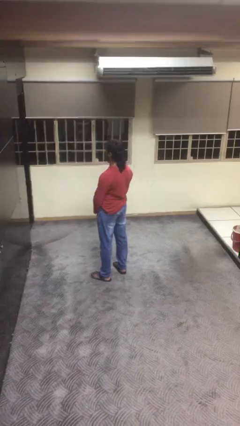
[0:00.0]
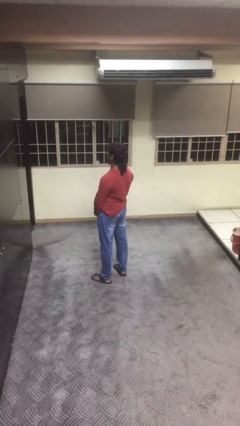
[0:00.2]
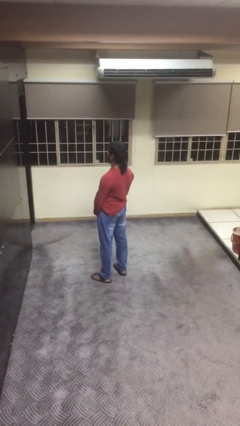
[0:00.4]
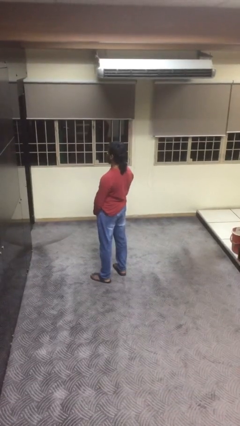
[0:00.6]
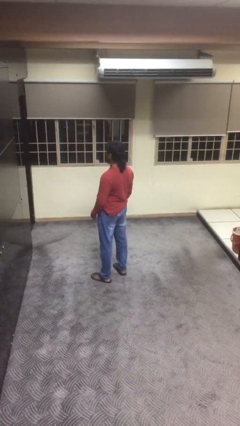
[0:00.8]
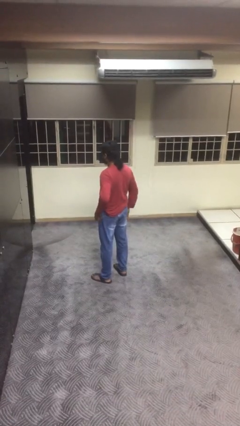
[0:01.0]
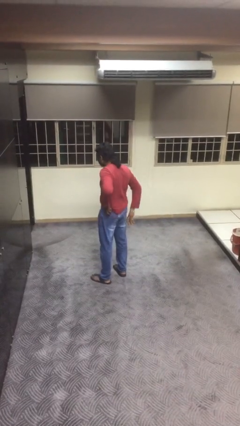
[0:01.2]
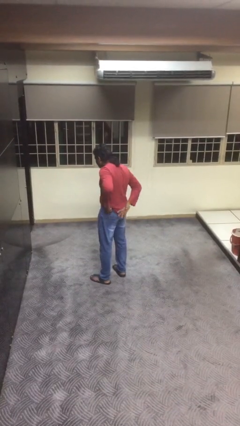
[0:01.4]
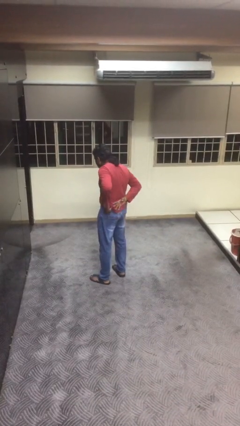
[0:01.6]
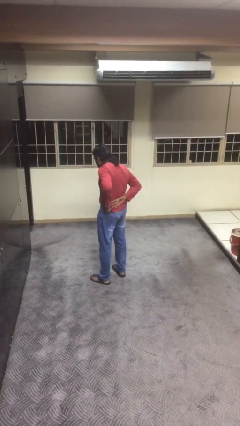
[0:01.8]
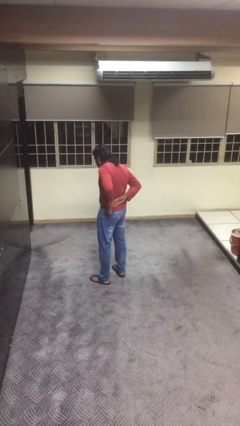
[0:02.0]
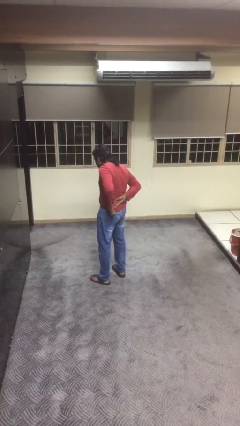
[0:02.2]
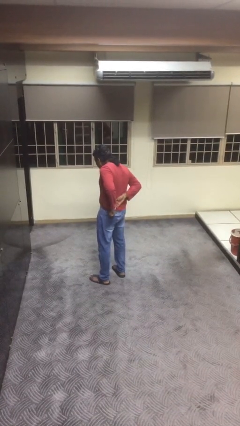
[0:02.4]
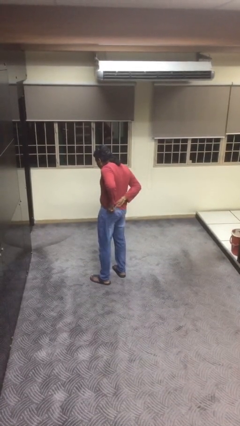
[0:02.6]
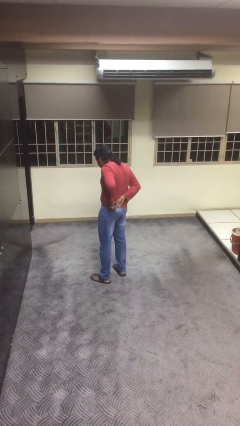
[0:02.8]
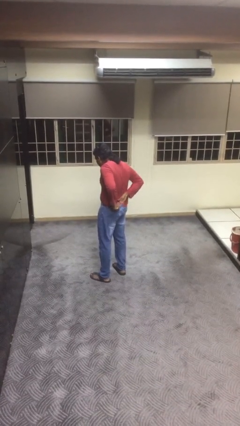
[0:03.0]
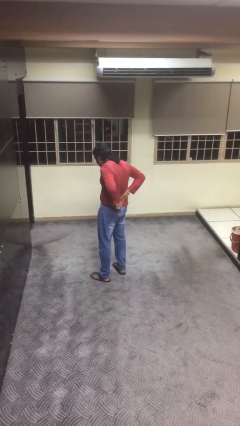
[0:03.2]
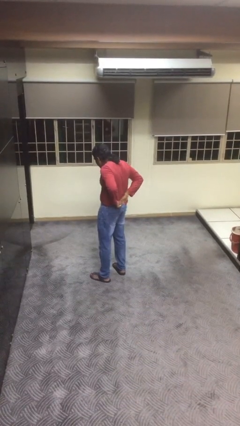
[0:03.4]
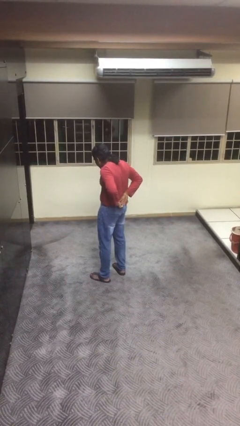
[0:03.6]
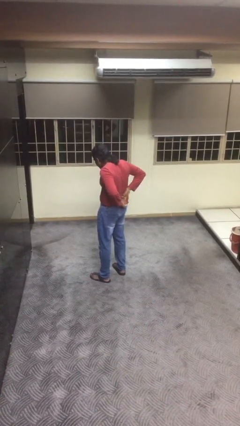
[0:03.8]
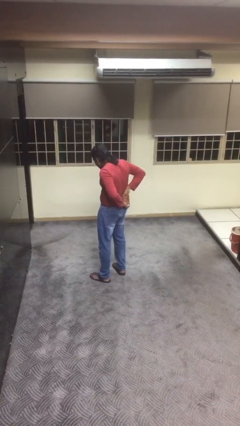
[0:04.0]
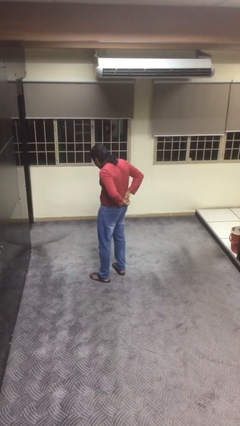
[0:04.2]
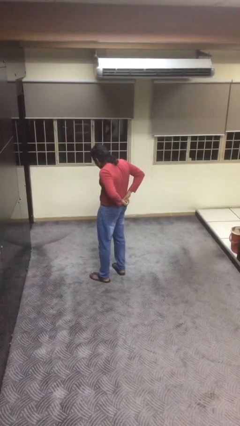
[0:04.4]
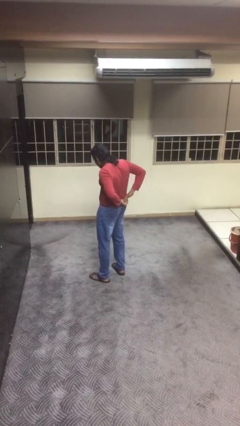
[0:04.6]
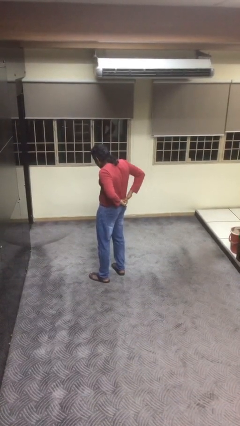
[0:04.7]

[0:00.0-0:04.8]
person tucks in shirt

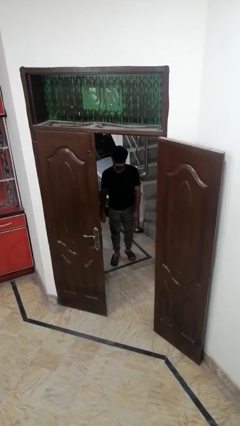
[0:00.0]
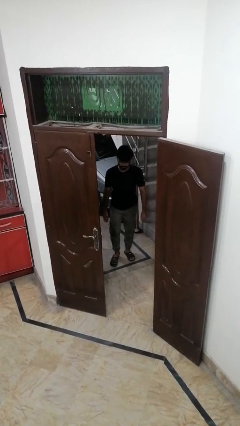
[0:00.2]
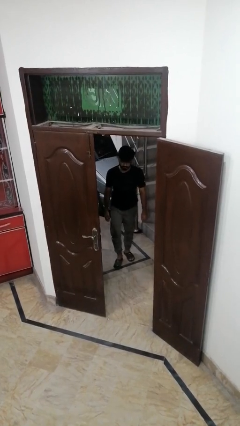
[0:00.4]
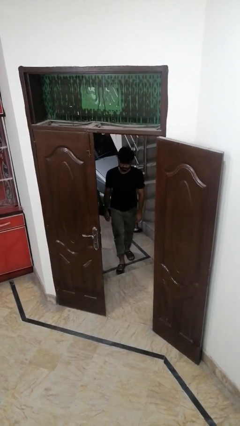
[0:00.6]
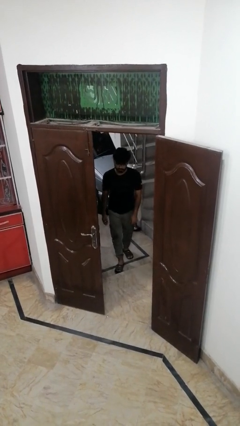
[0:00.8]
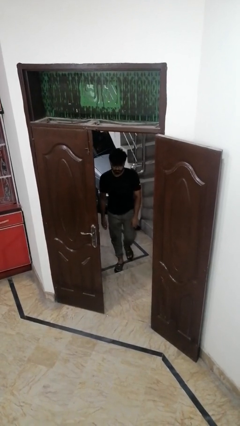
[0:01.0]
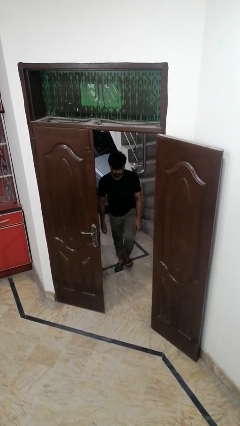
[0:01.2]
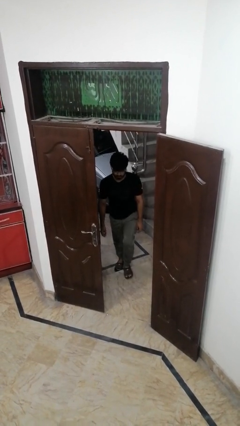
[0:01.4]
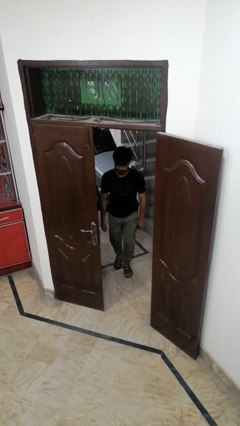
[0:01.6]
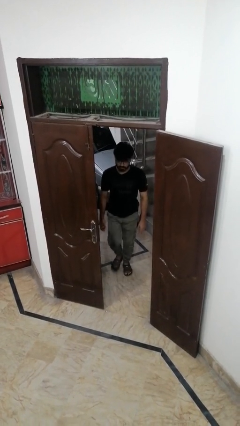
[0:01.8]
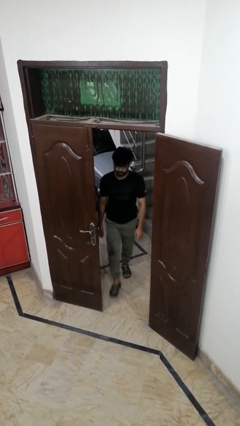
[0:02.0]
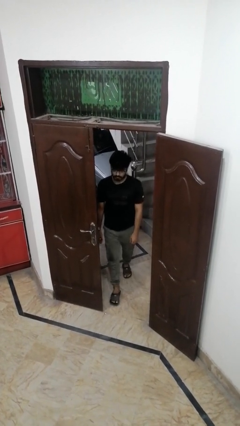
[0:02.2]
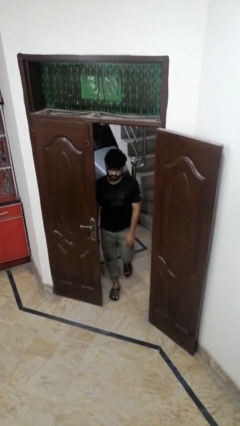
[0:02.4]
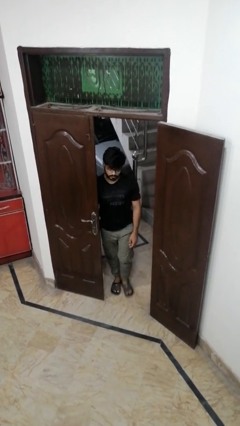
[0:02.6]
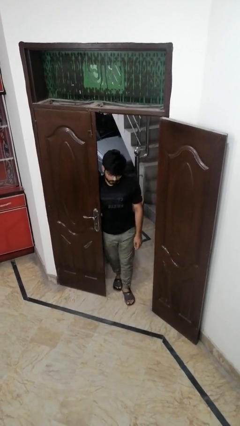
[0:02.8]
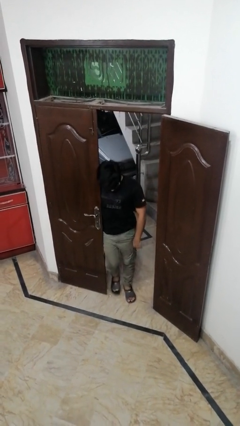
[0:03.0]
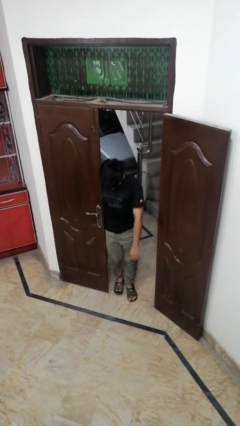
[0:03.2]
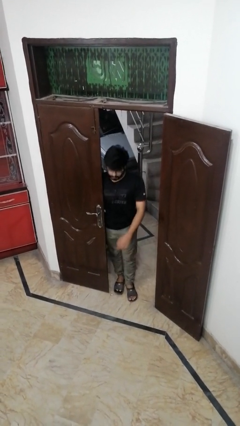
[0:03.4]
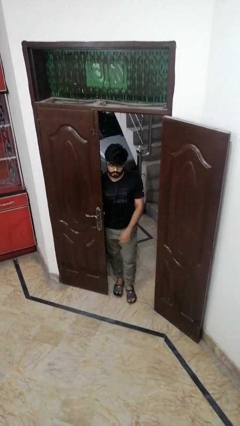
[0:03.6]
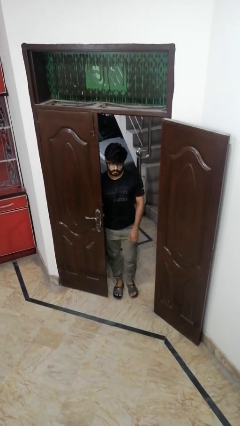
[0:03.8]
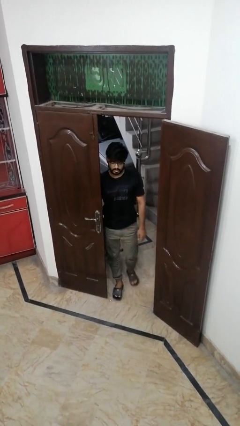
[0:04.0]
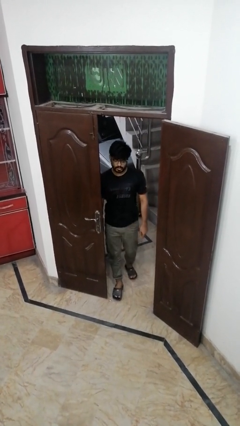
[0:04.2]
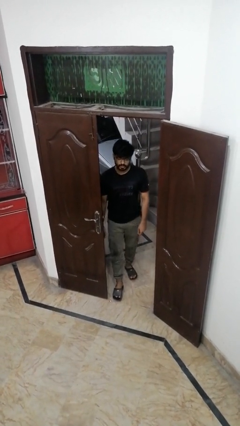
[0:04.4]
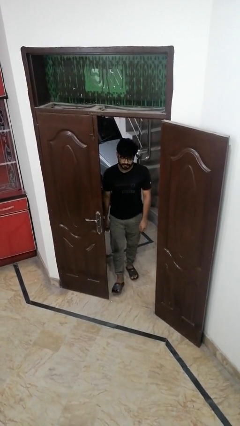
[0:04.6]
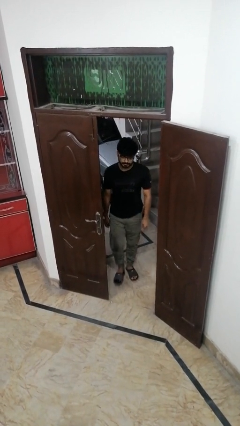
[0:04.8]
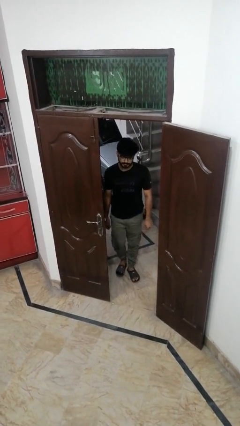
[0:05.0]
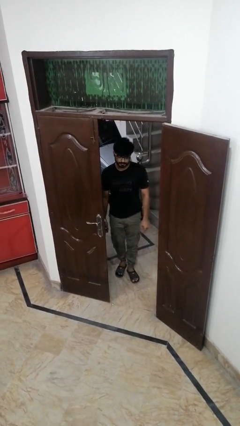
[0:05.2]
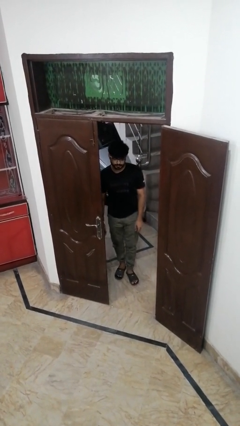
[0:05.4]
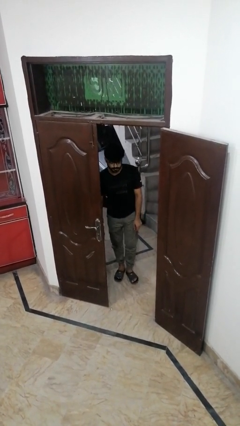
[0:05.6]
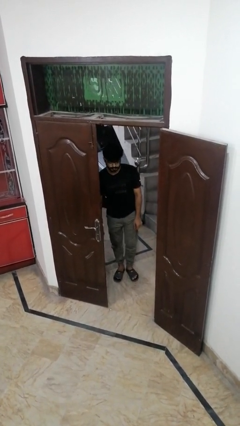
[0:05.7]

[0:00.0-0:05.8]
person bumps into wall

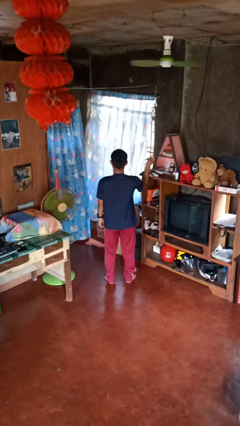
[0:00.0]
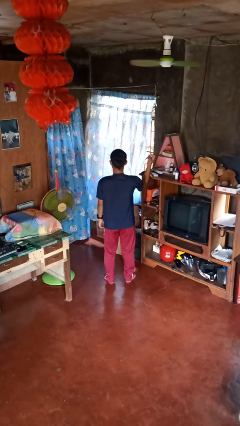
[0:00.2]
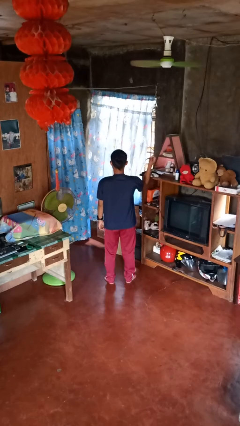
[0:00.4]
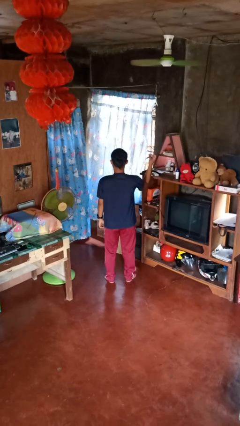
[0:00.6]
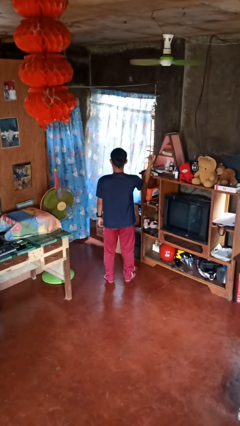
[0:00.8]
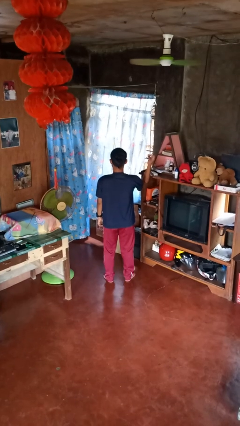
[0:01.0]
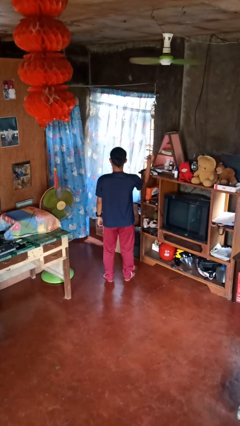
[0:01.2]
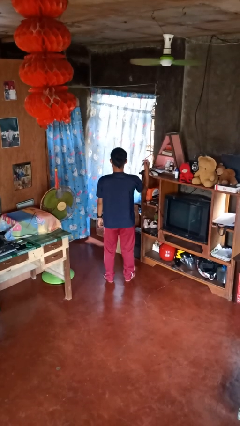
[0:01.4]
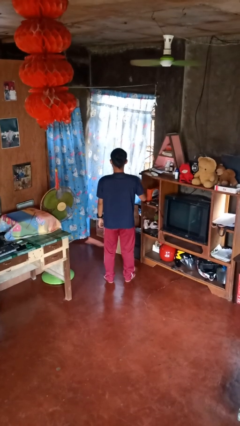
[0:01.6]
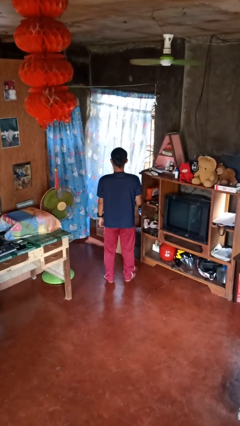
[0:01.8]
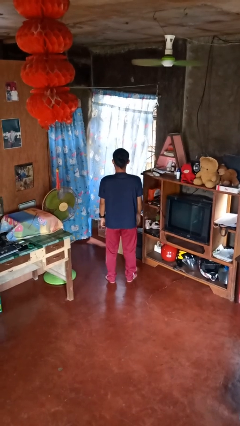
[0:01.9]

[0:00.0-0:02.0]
person snaps fingers

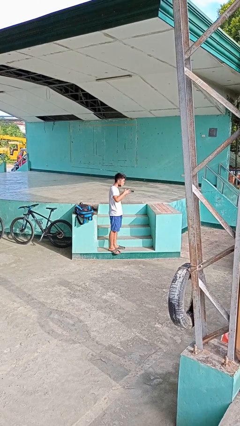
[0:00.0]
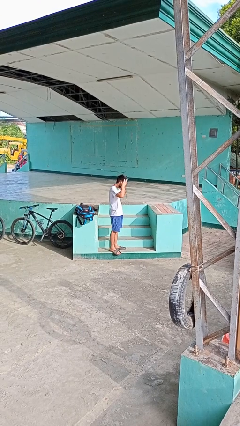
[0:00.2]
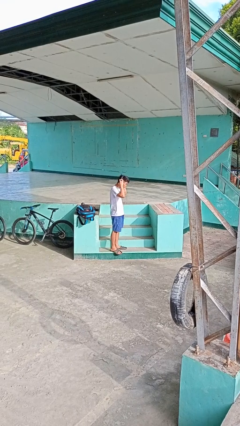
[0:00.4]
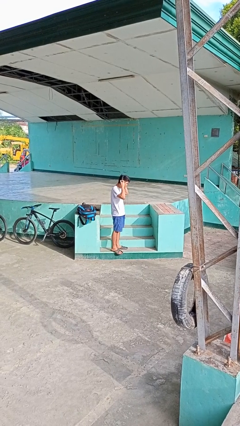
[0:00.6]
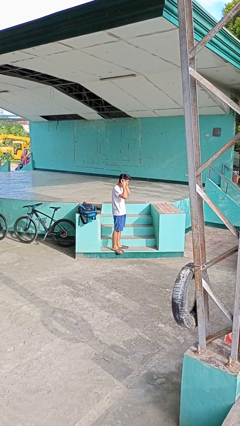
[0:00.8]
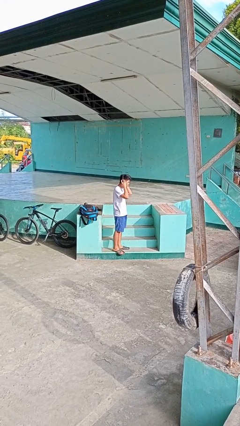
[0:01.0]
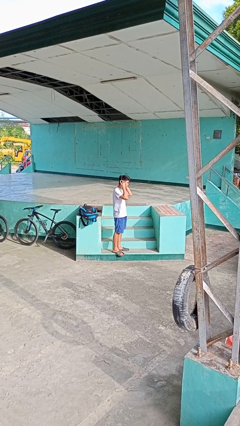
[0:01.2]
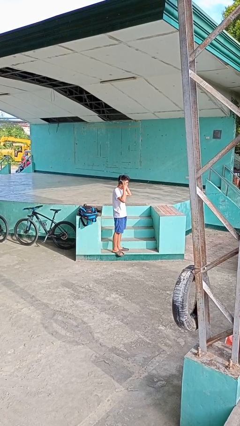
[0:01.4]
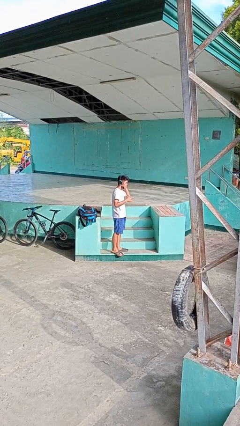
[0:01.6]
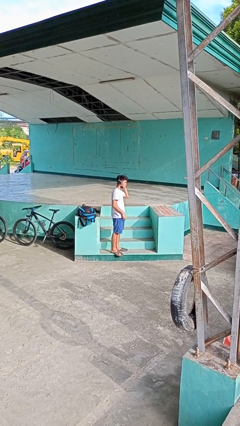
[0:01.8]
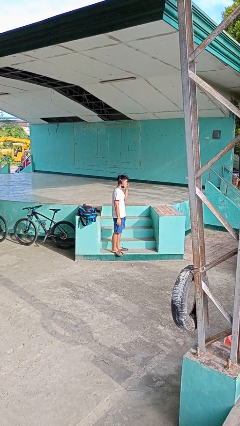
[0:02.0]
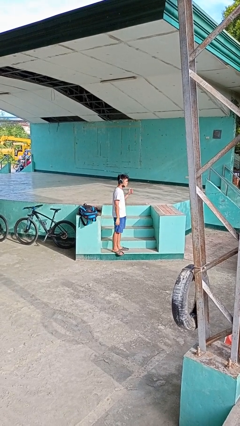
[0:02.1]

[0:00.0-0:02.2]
person puts on headphones

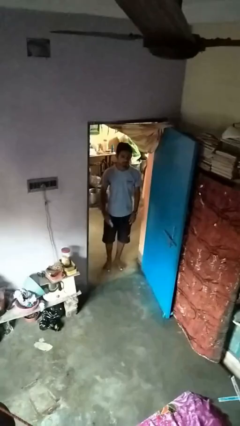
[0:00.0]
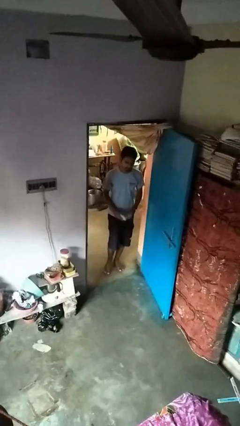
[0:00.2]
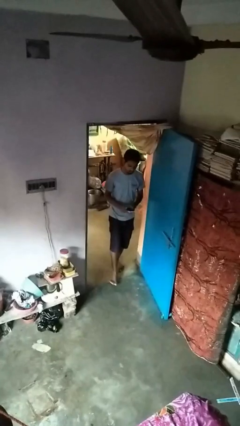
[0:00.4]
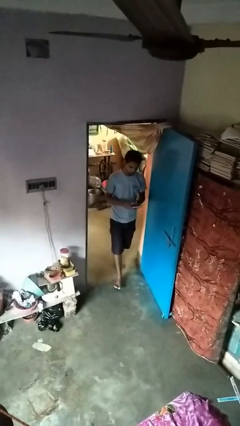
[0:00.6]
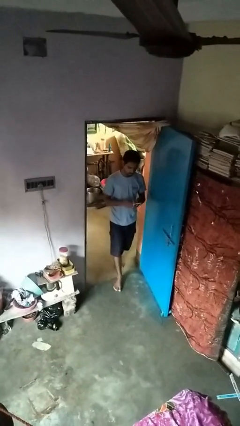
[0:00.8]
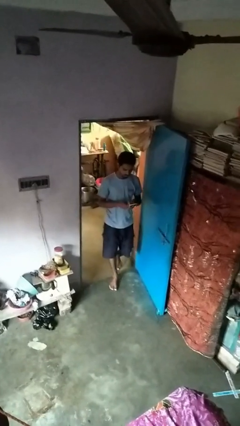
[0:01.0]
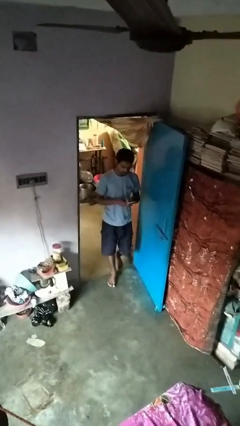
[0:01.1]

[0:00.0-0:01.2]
person enters scene through structure

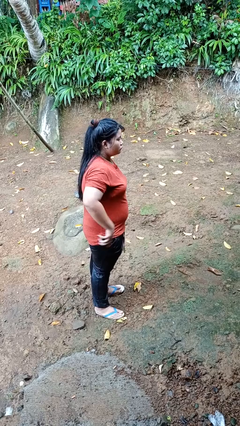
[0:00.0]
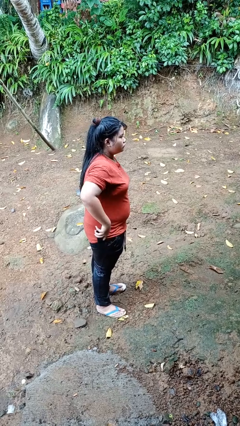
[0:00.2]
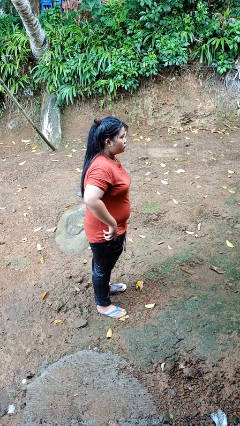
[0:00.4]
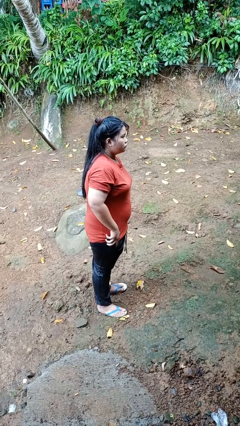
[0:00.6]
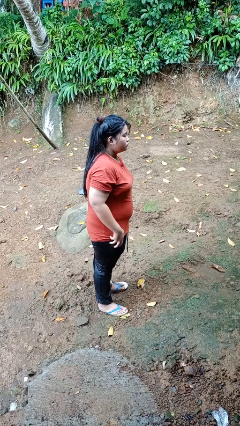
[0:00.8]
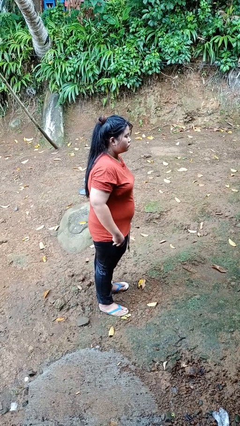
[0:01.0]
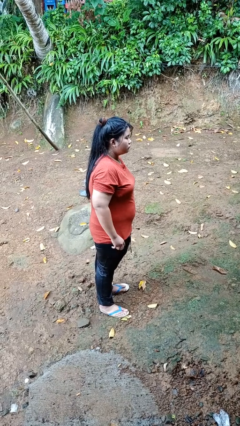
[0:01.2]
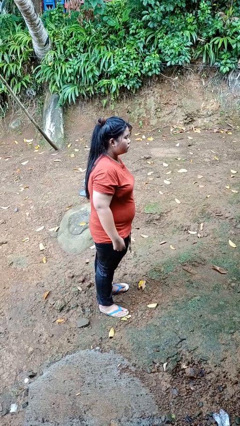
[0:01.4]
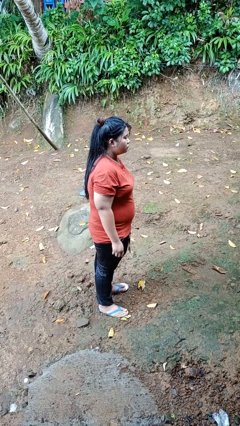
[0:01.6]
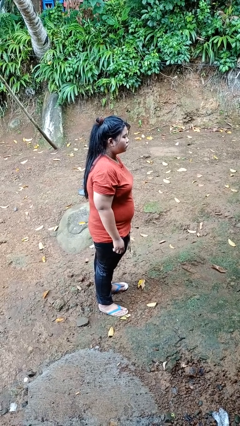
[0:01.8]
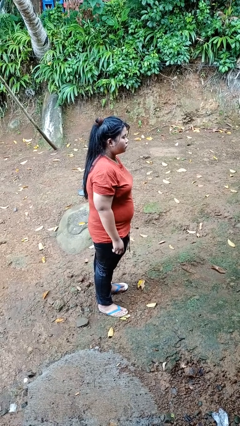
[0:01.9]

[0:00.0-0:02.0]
person puts phone into pocket
